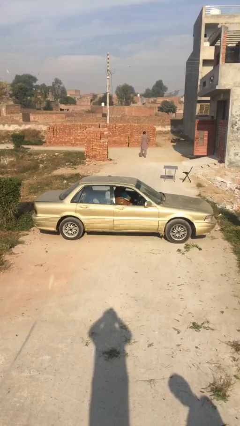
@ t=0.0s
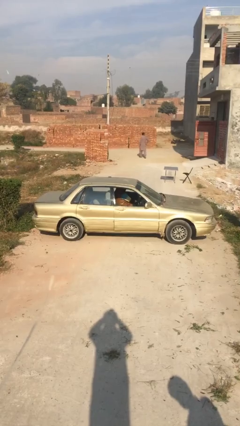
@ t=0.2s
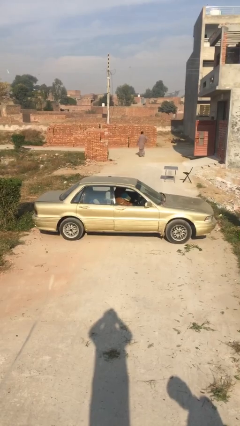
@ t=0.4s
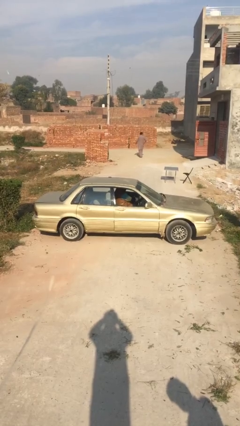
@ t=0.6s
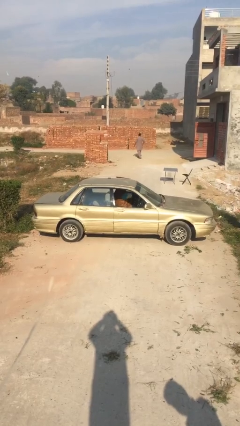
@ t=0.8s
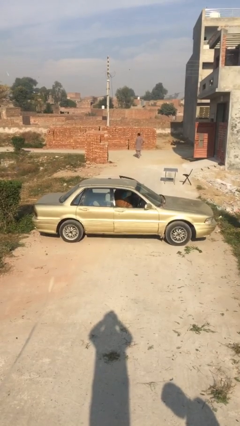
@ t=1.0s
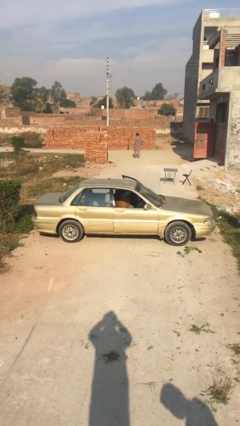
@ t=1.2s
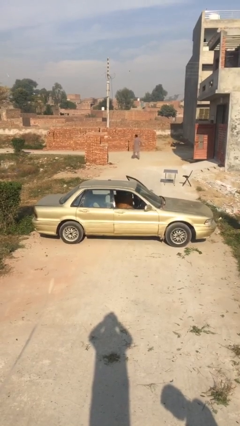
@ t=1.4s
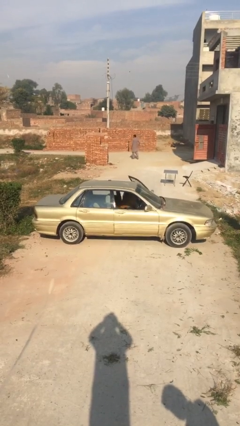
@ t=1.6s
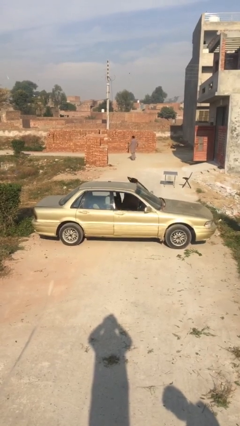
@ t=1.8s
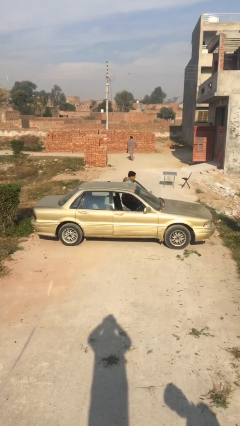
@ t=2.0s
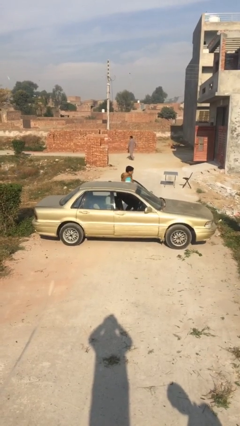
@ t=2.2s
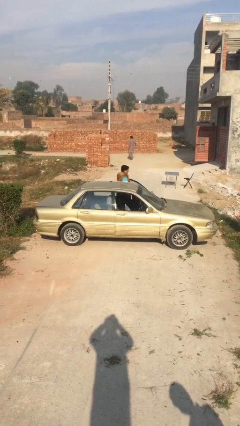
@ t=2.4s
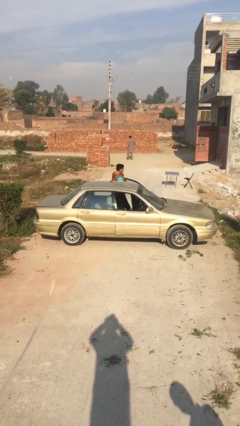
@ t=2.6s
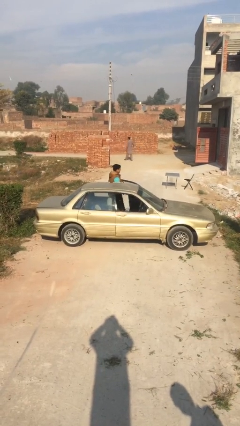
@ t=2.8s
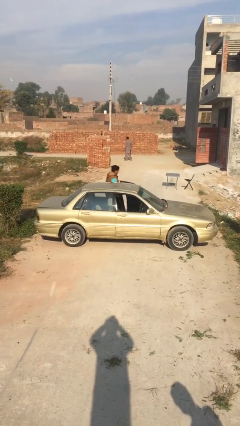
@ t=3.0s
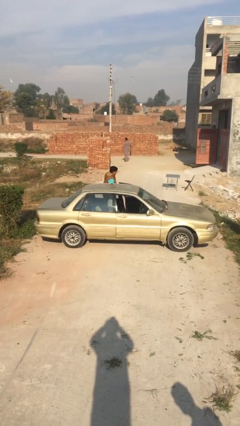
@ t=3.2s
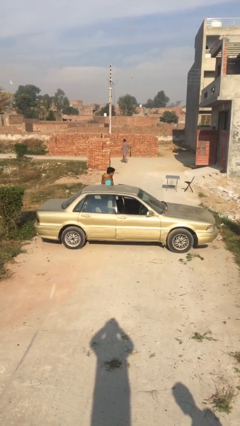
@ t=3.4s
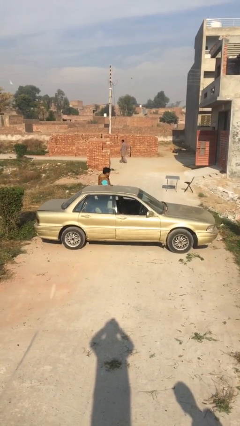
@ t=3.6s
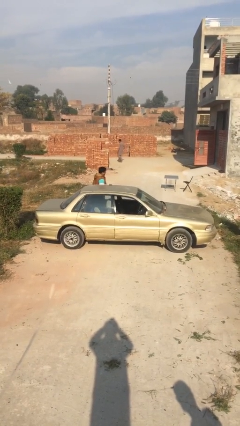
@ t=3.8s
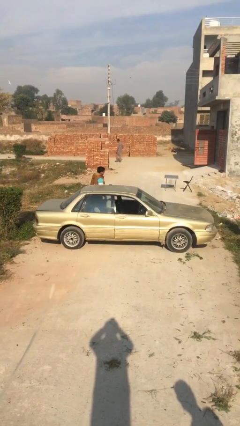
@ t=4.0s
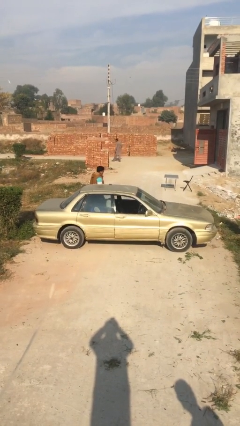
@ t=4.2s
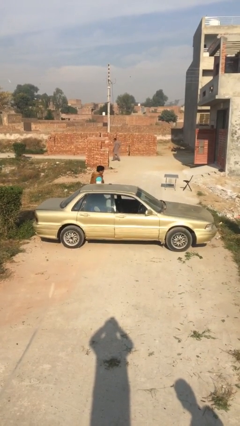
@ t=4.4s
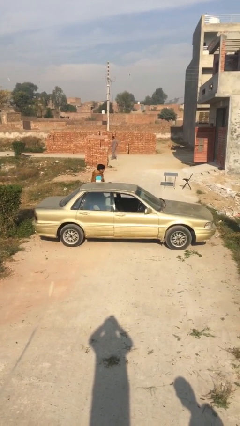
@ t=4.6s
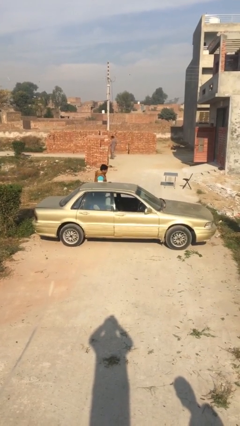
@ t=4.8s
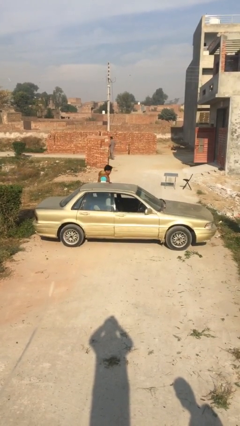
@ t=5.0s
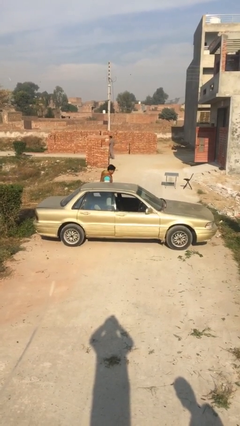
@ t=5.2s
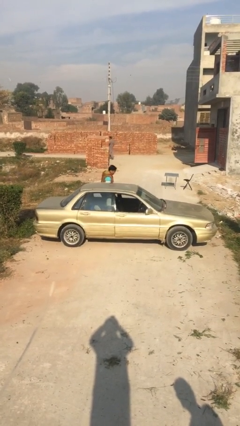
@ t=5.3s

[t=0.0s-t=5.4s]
car drops off person

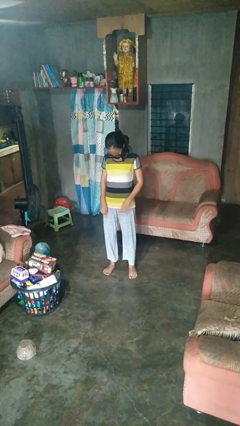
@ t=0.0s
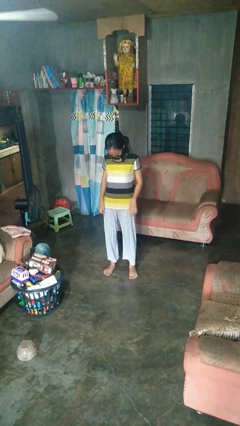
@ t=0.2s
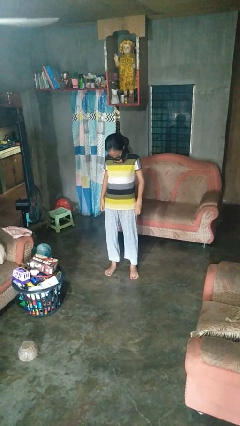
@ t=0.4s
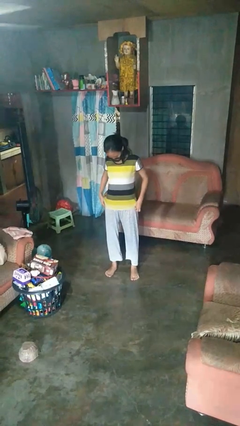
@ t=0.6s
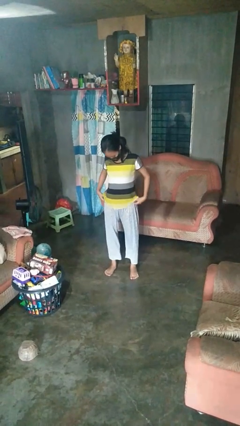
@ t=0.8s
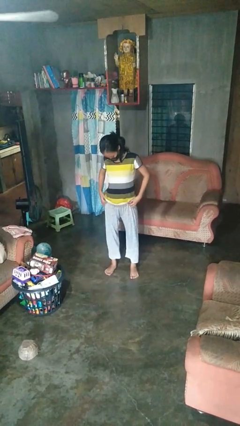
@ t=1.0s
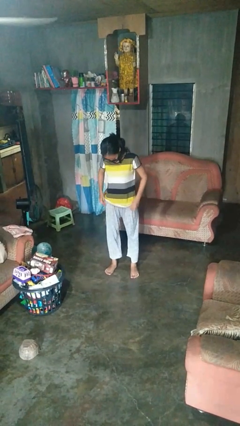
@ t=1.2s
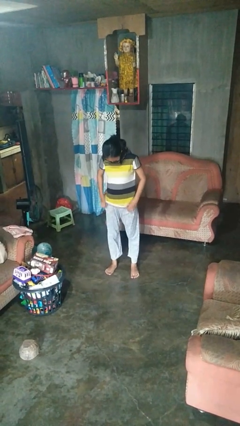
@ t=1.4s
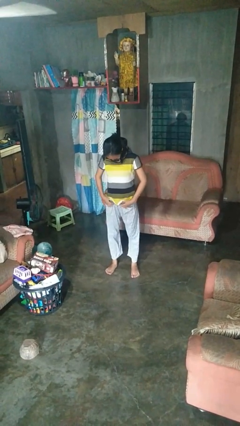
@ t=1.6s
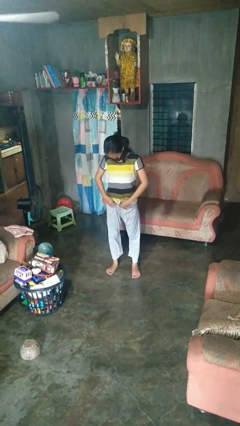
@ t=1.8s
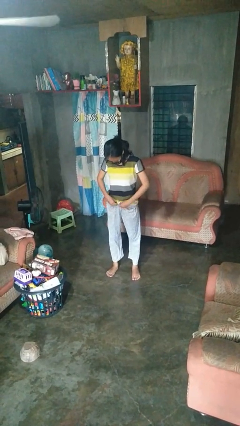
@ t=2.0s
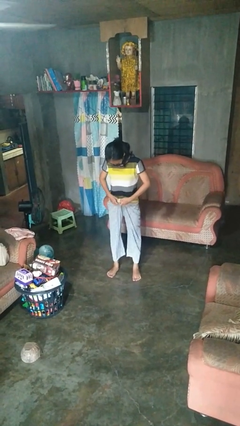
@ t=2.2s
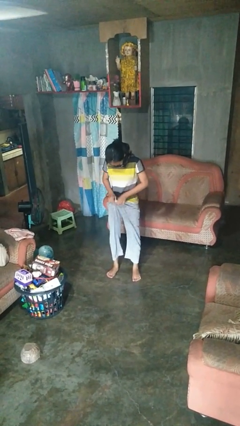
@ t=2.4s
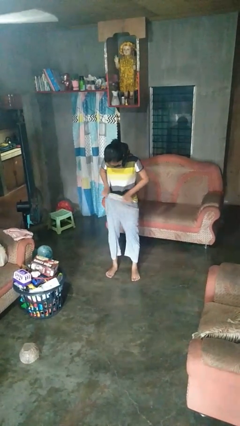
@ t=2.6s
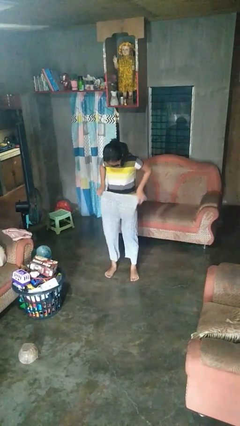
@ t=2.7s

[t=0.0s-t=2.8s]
person tucks in shirt

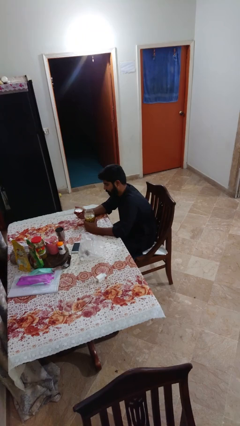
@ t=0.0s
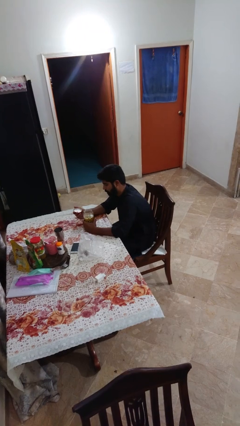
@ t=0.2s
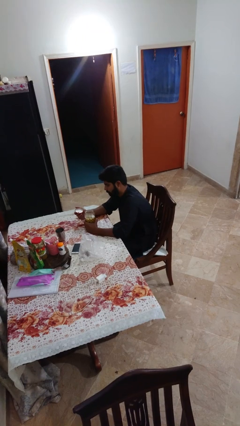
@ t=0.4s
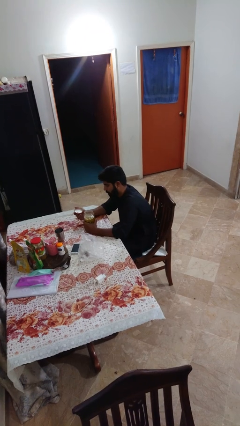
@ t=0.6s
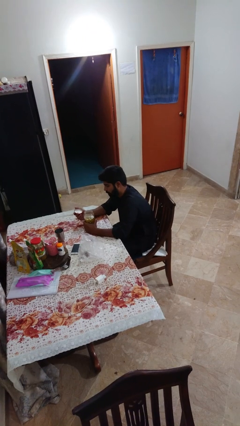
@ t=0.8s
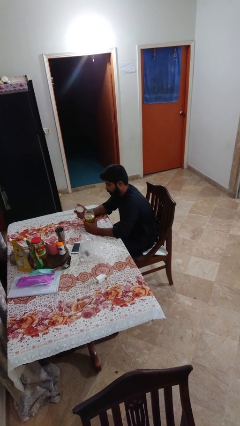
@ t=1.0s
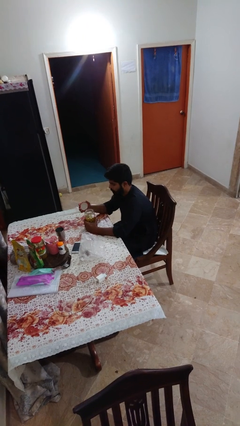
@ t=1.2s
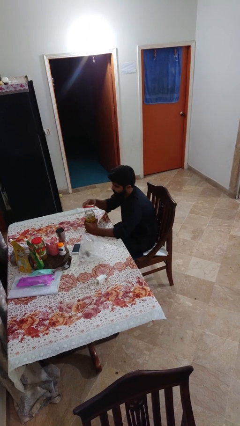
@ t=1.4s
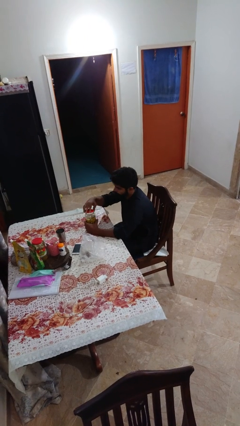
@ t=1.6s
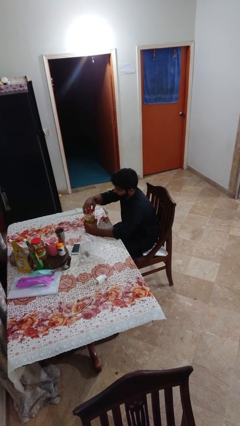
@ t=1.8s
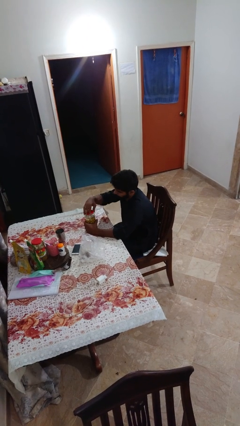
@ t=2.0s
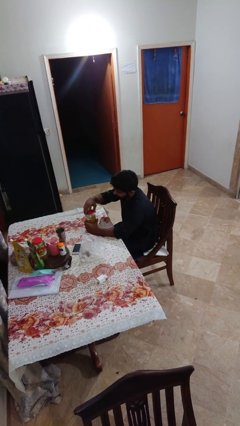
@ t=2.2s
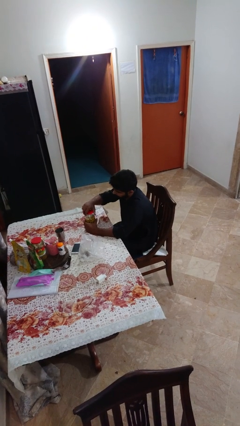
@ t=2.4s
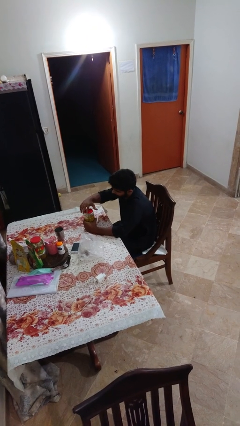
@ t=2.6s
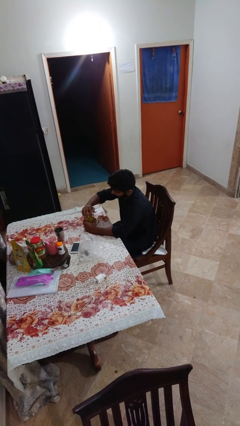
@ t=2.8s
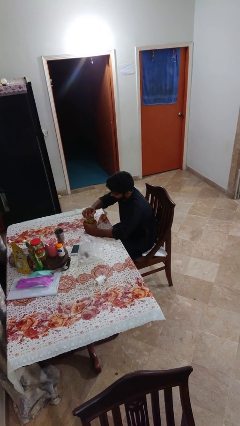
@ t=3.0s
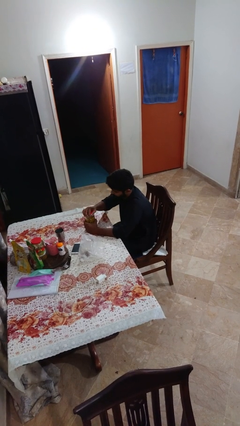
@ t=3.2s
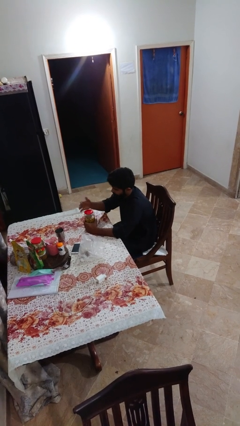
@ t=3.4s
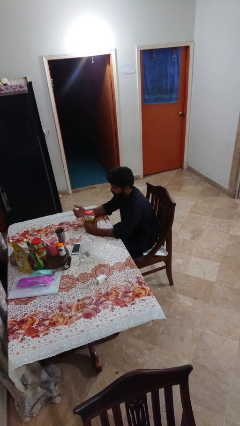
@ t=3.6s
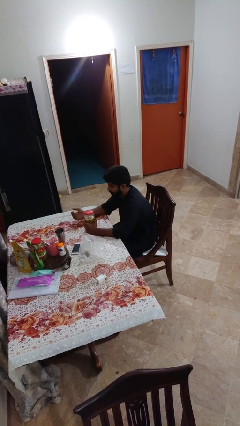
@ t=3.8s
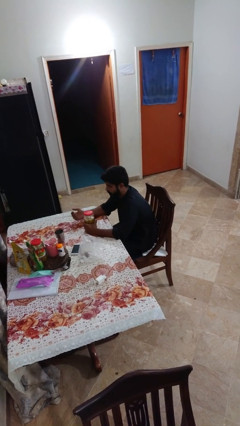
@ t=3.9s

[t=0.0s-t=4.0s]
person closes jar

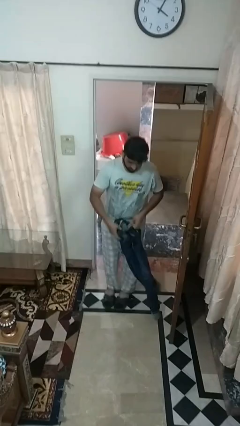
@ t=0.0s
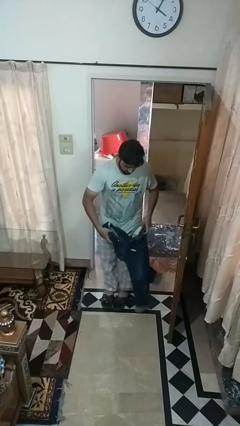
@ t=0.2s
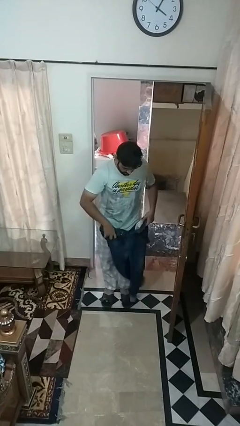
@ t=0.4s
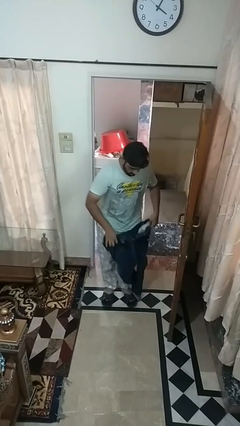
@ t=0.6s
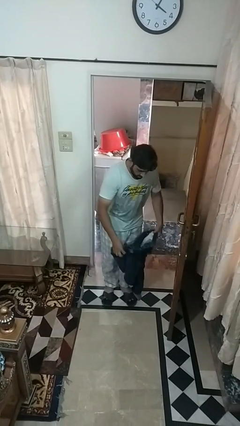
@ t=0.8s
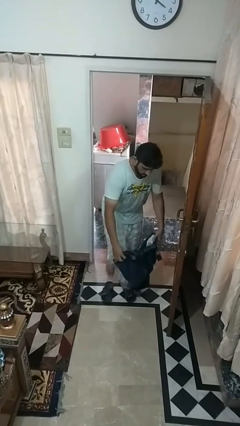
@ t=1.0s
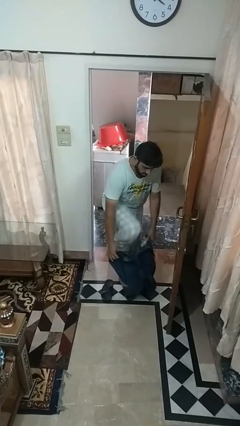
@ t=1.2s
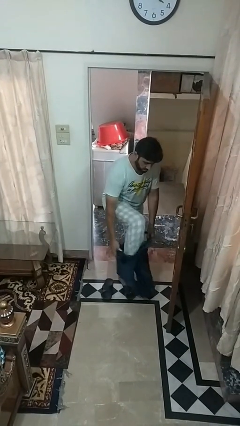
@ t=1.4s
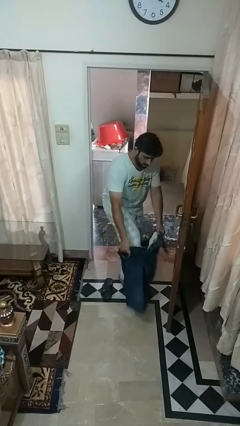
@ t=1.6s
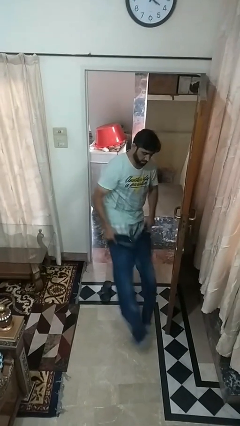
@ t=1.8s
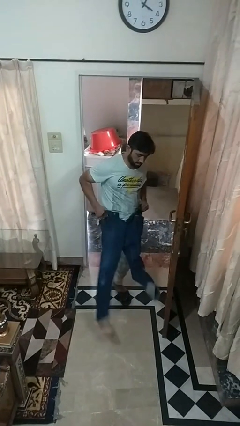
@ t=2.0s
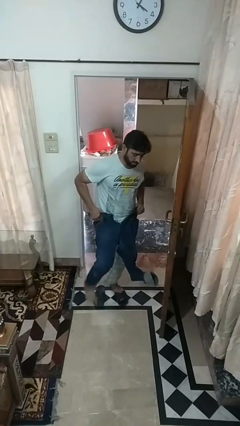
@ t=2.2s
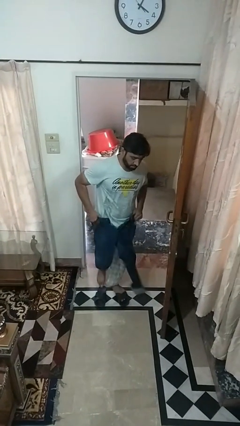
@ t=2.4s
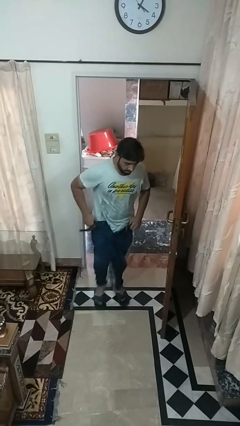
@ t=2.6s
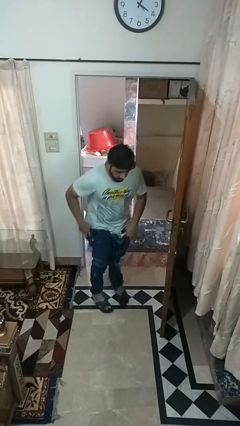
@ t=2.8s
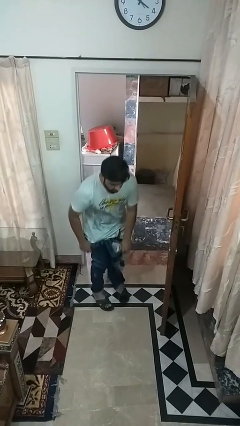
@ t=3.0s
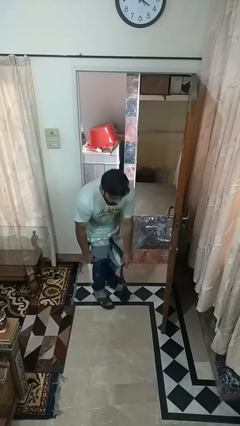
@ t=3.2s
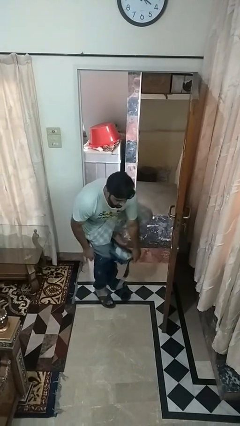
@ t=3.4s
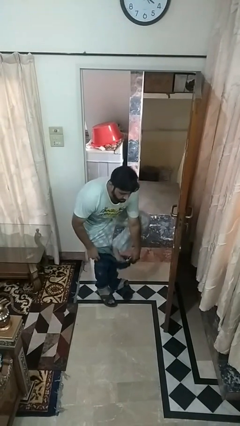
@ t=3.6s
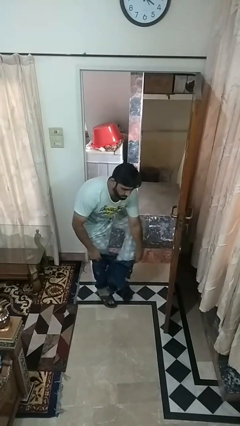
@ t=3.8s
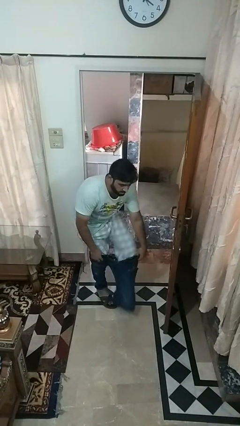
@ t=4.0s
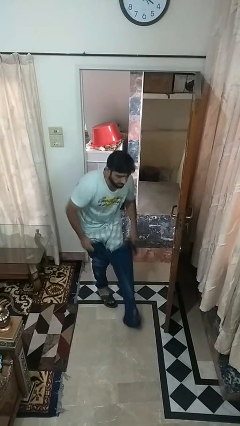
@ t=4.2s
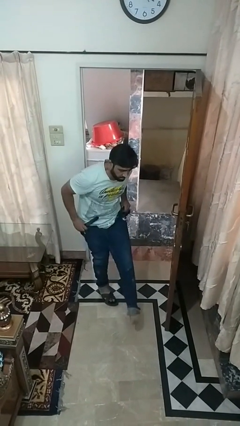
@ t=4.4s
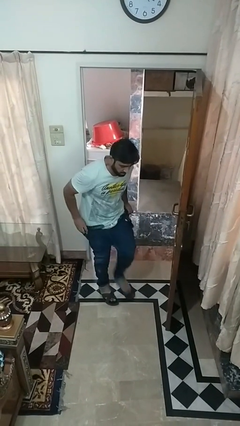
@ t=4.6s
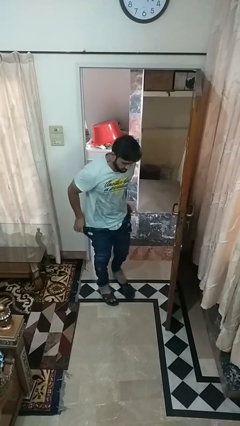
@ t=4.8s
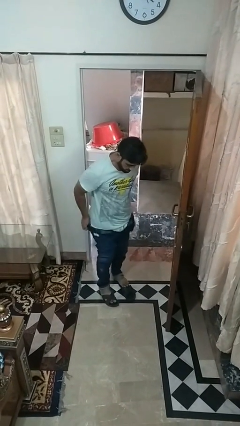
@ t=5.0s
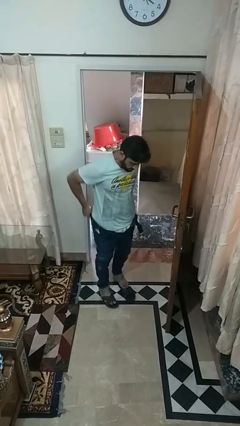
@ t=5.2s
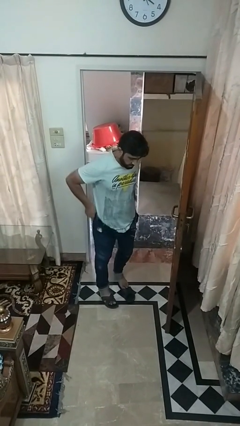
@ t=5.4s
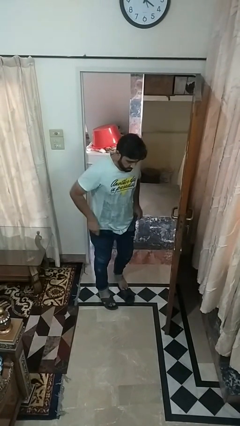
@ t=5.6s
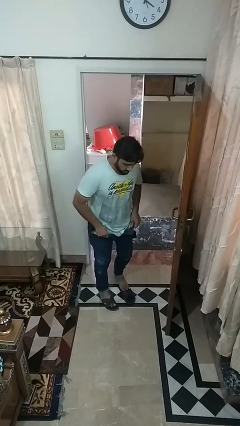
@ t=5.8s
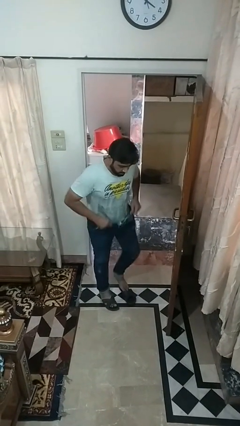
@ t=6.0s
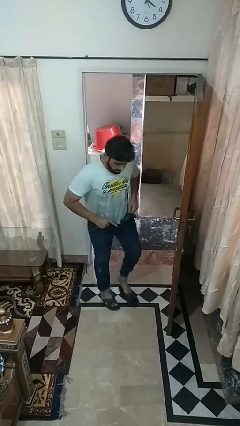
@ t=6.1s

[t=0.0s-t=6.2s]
person puts on pants
